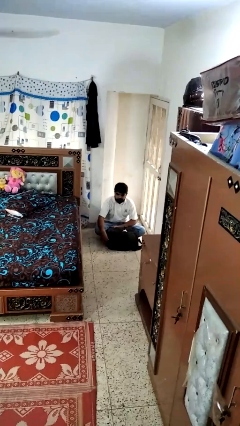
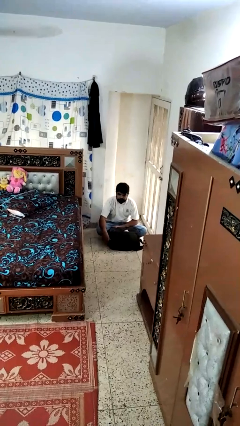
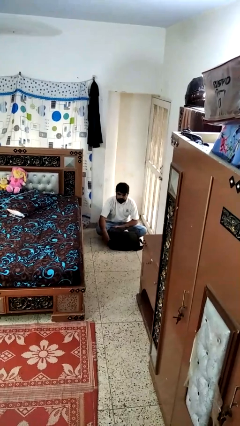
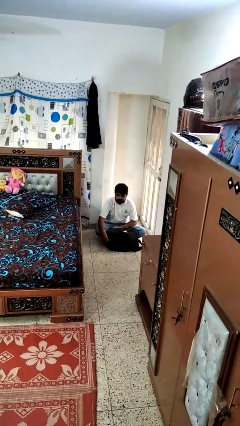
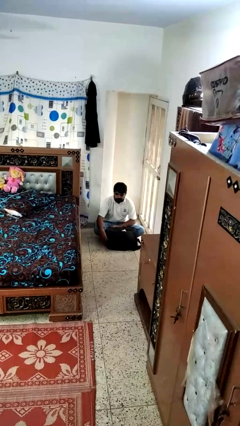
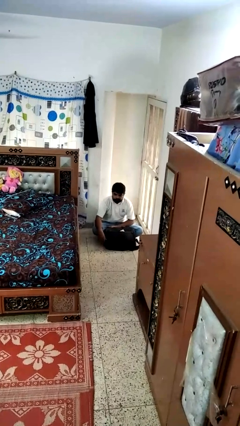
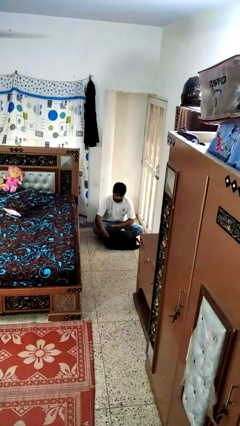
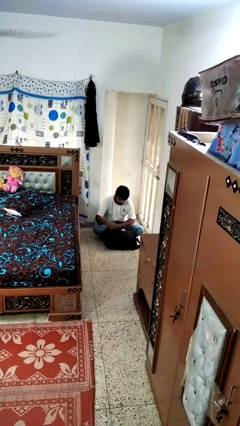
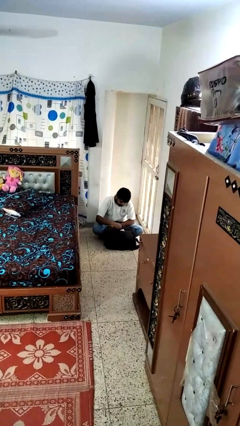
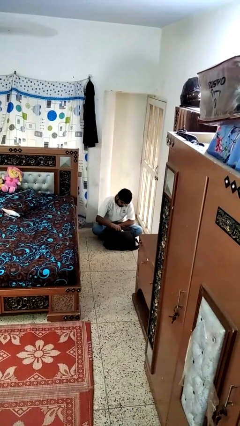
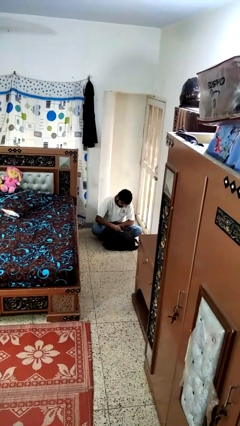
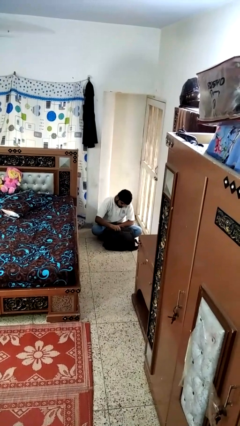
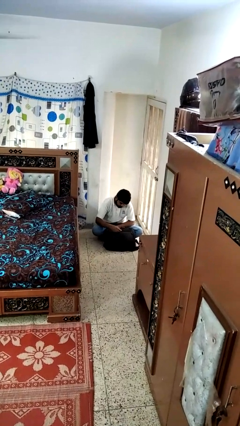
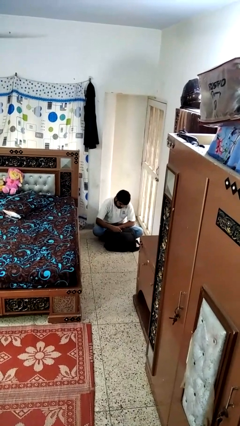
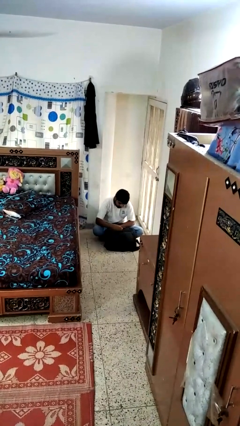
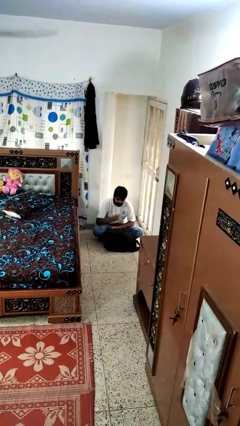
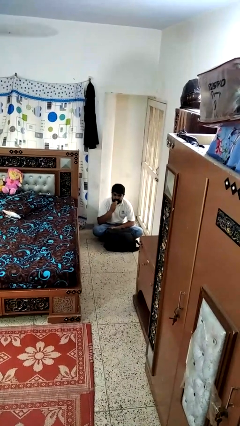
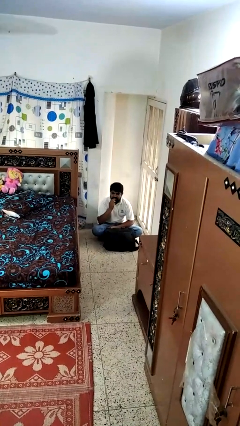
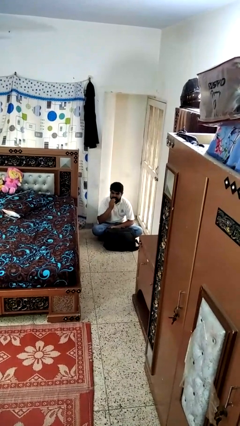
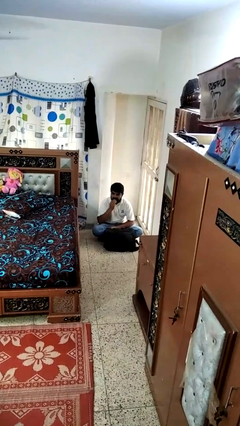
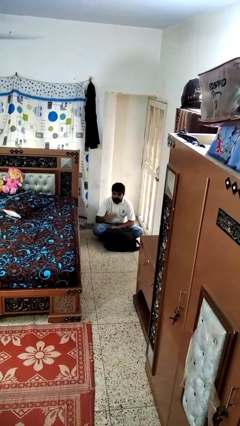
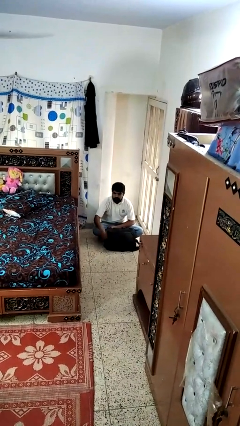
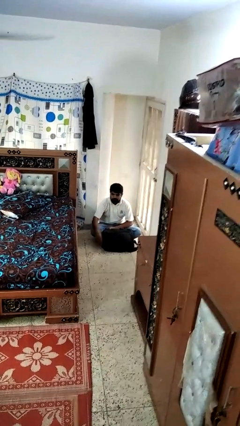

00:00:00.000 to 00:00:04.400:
person eats snack from bag

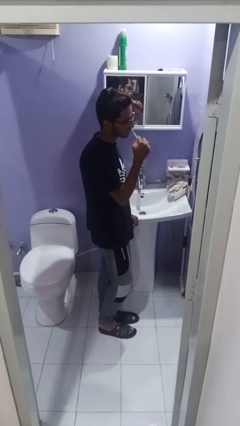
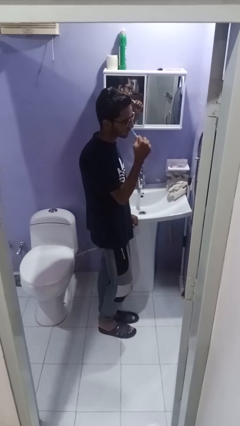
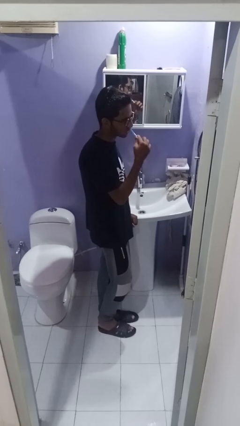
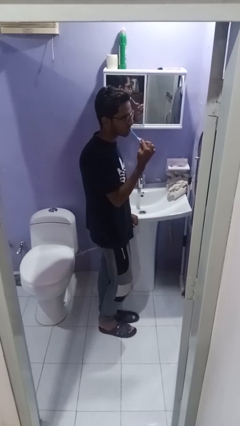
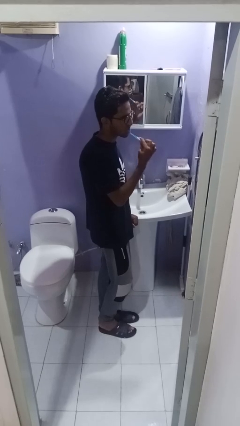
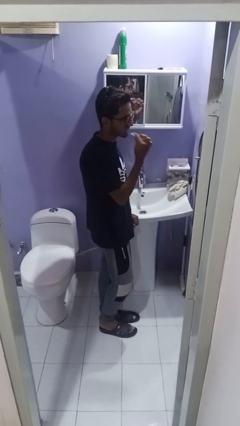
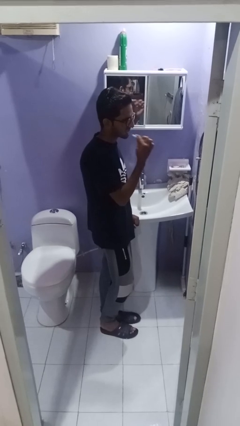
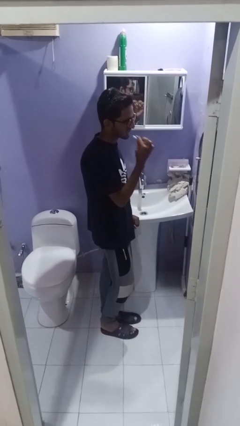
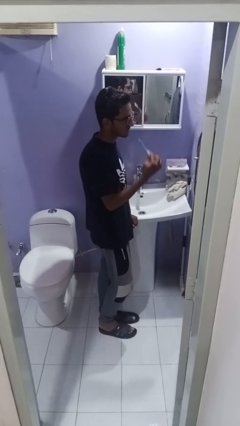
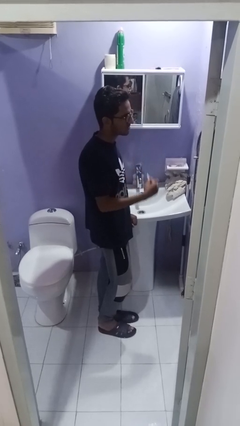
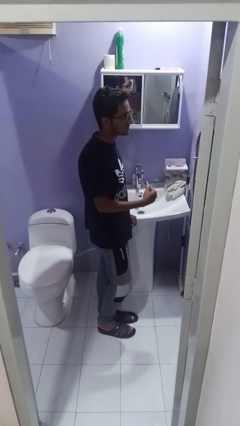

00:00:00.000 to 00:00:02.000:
person brushes teeth

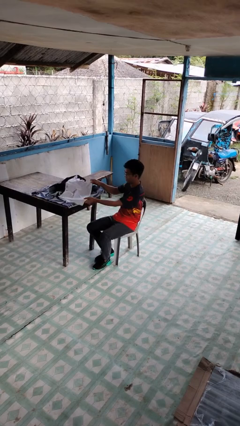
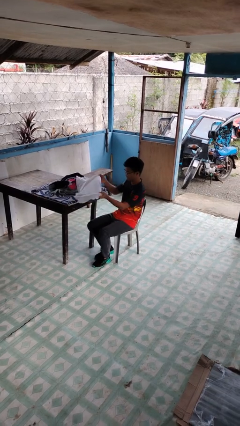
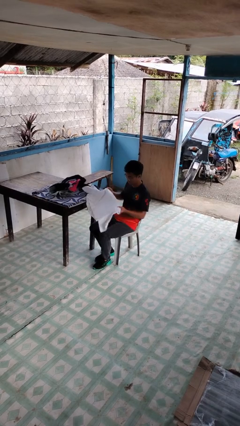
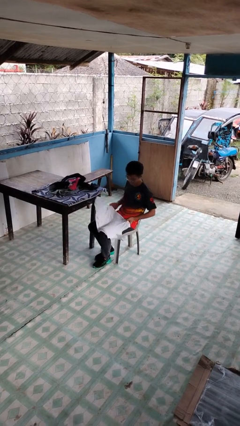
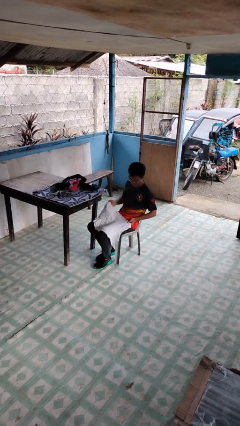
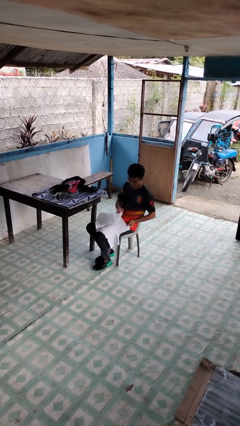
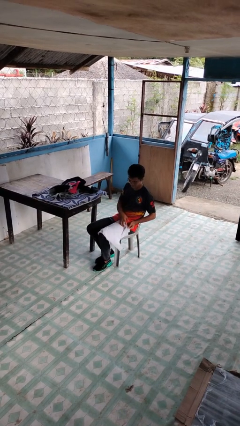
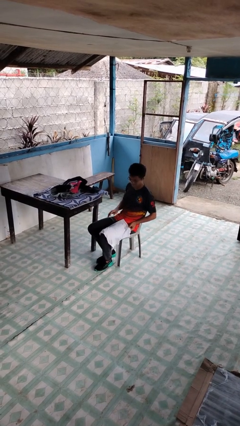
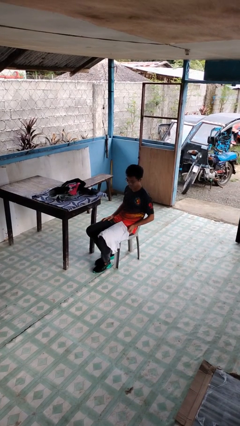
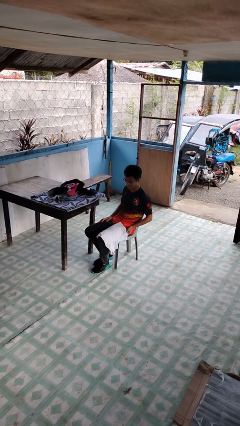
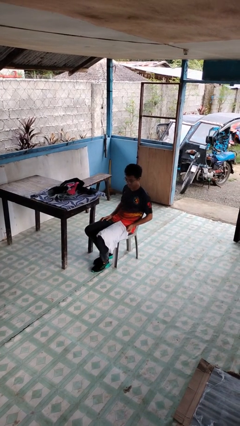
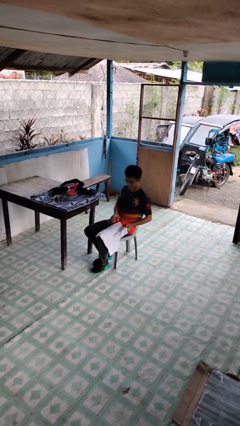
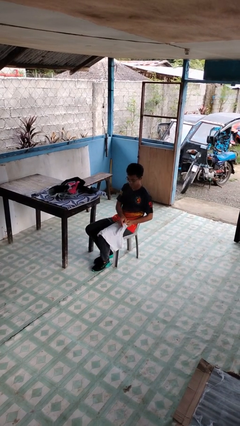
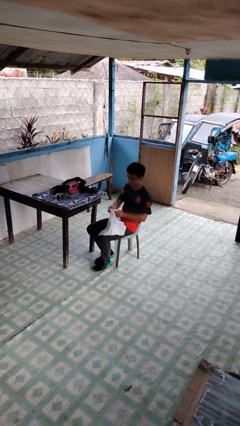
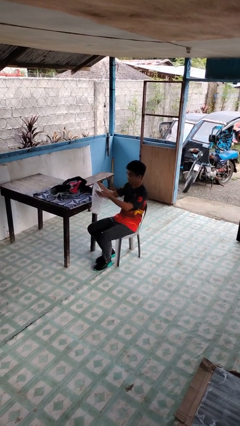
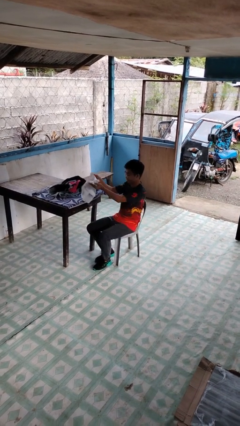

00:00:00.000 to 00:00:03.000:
person folds shirt

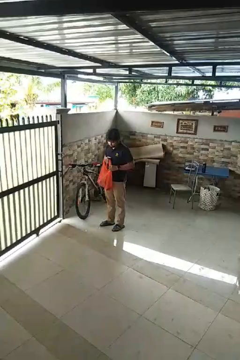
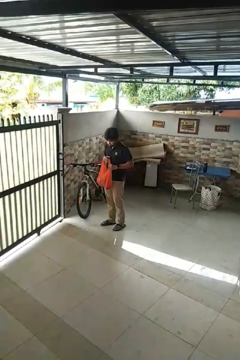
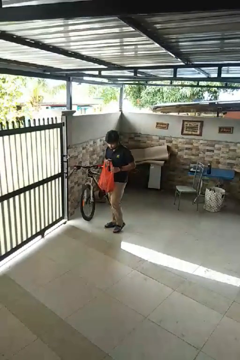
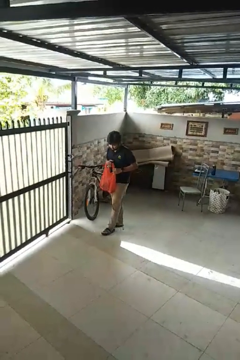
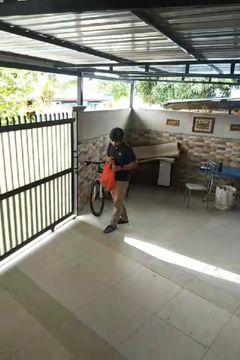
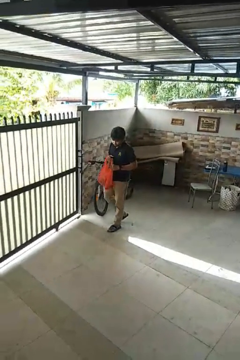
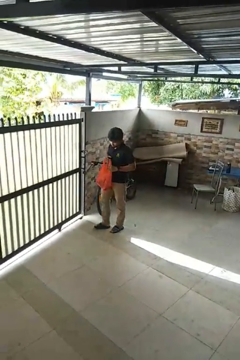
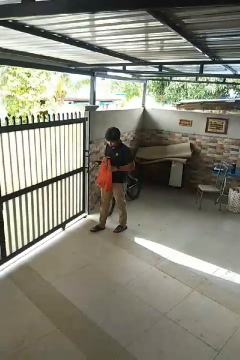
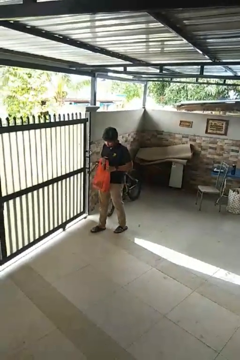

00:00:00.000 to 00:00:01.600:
person carries groceries

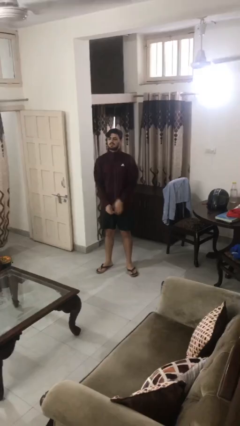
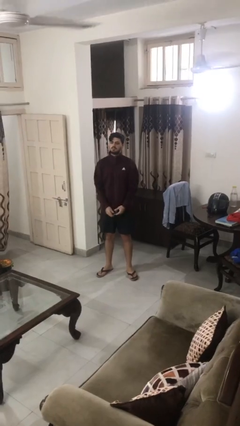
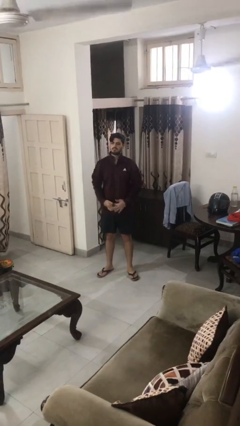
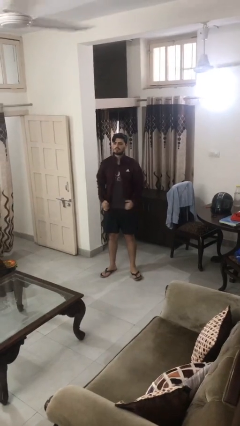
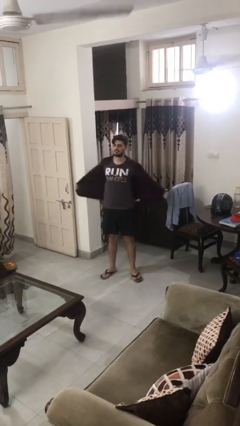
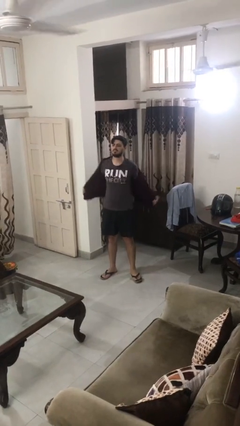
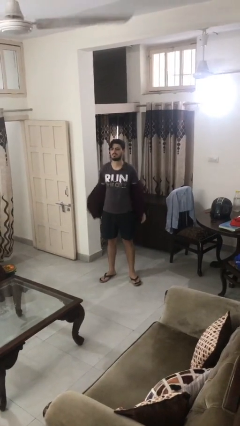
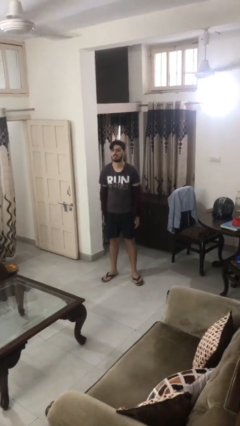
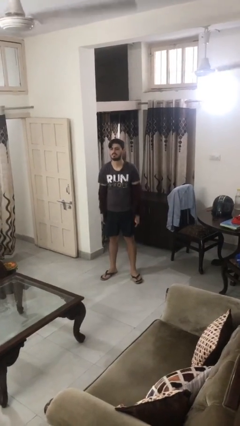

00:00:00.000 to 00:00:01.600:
person takes off jacket

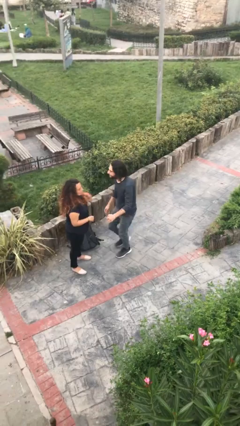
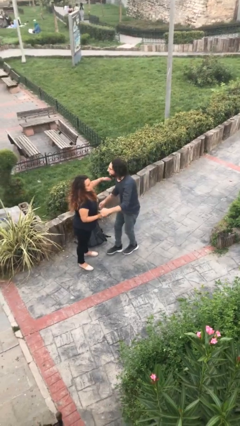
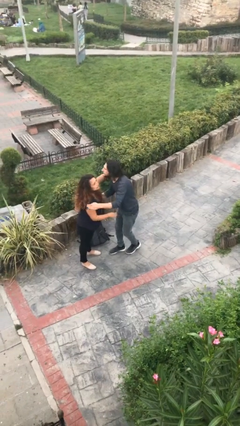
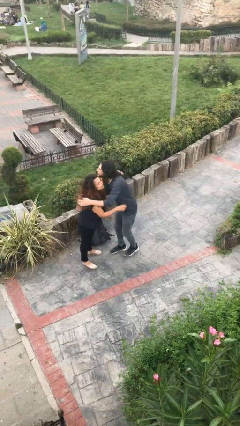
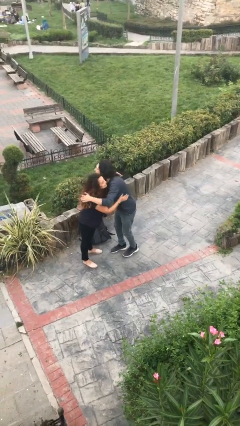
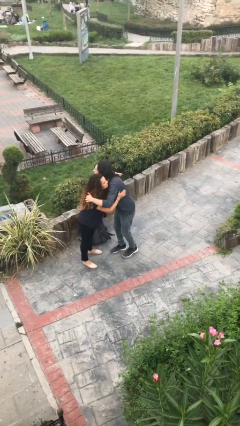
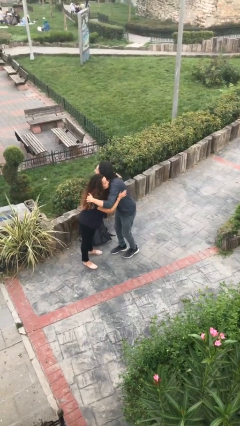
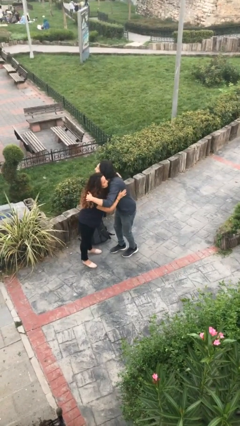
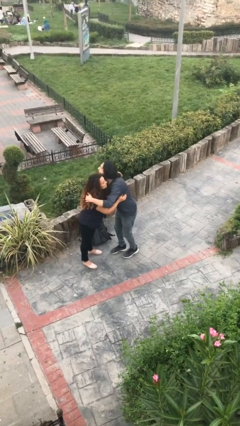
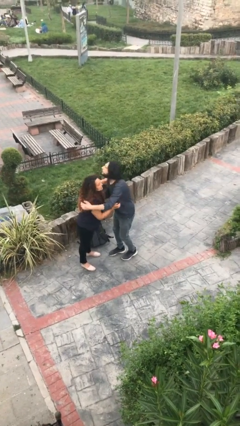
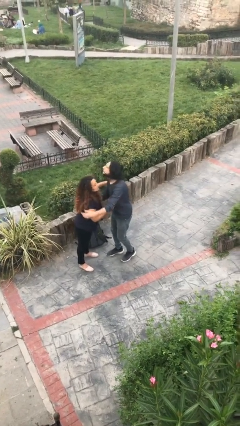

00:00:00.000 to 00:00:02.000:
person embraces person

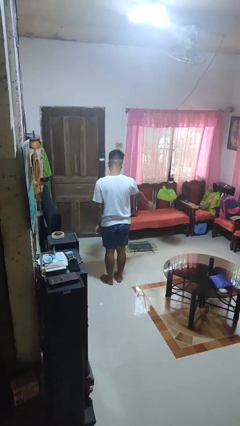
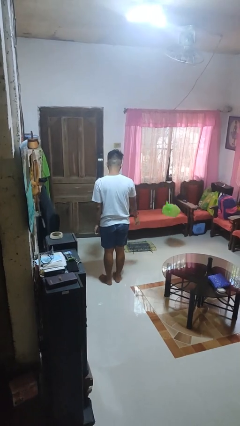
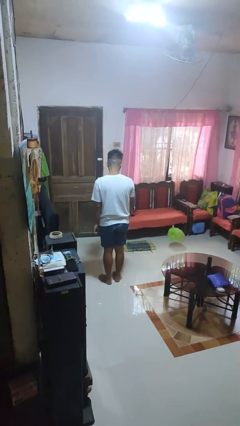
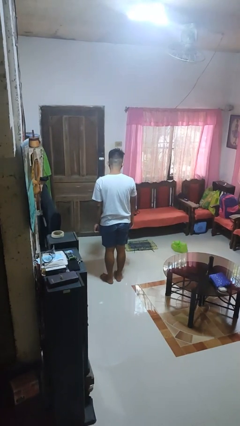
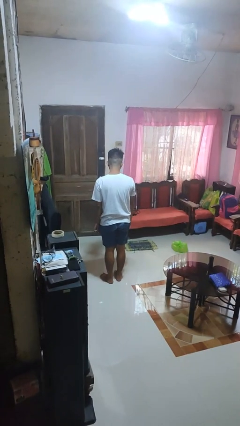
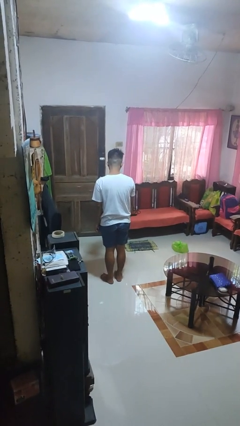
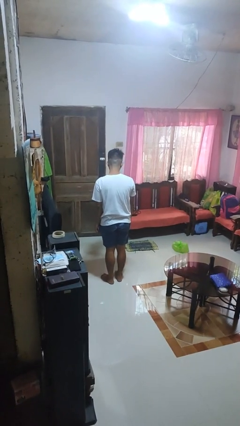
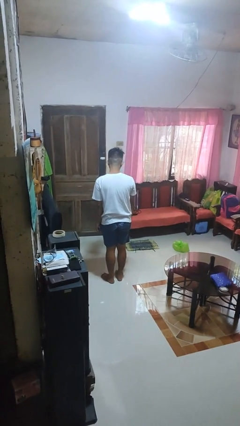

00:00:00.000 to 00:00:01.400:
person throws object to ground

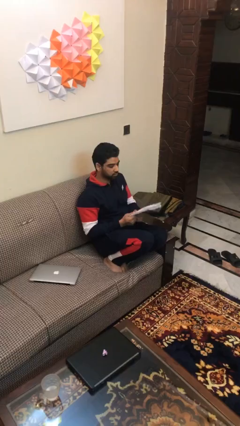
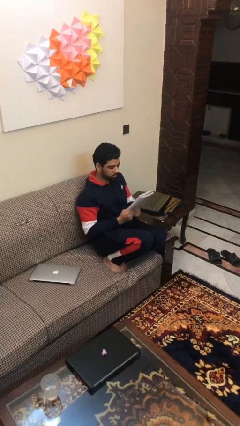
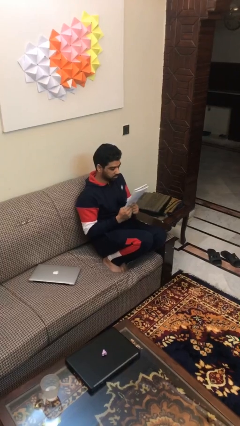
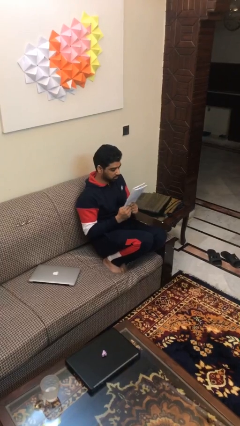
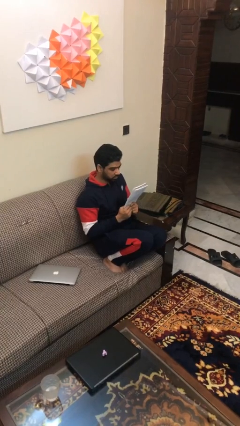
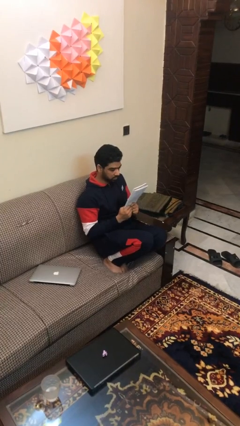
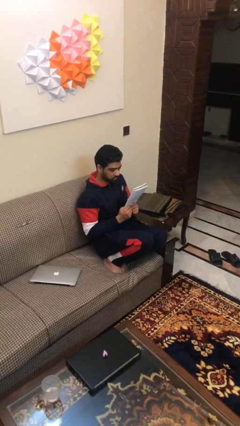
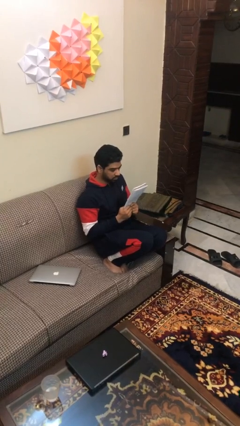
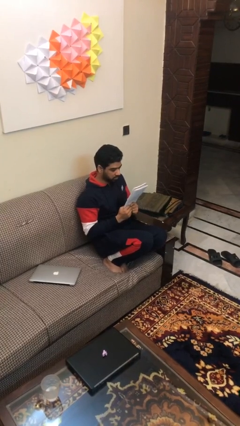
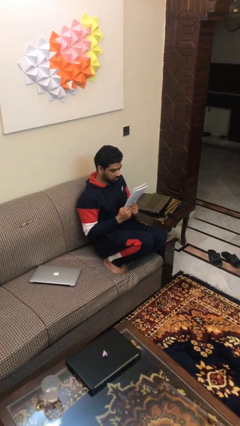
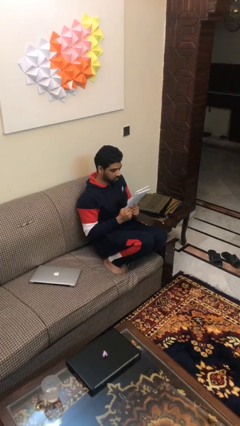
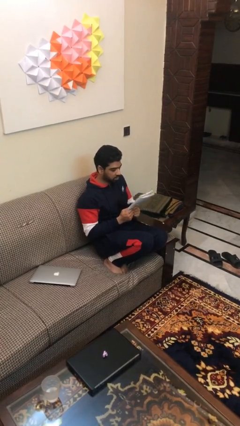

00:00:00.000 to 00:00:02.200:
person reads document
